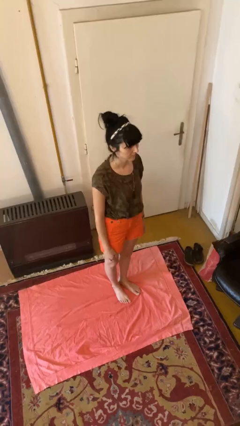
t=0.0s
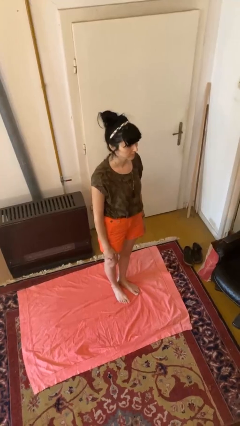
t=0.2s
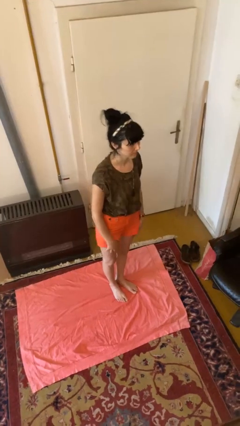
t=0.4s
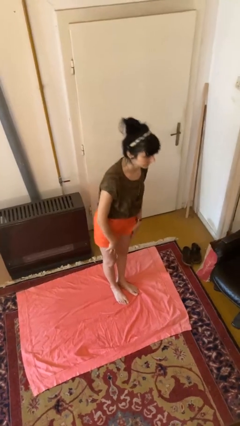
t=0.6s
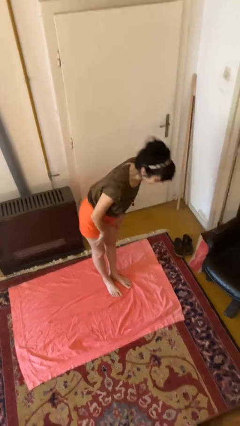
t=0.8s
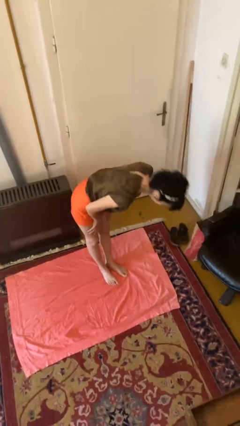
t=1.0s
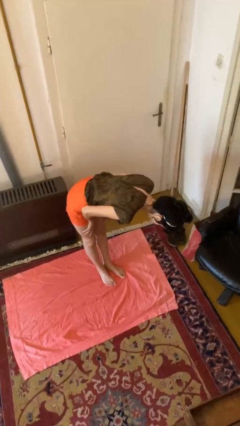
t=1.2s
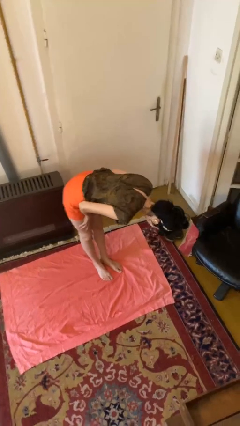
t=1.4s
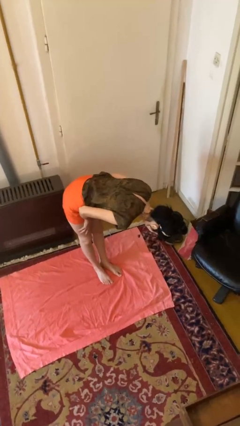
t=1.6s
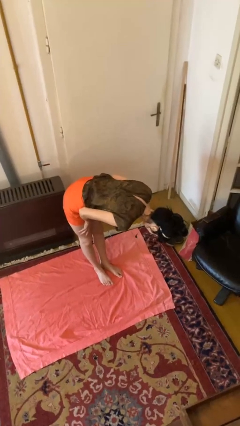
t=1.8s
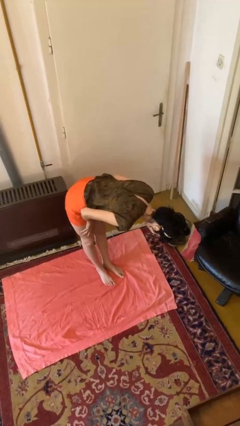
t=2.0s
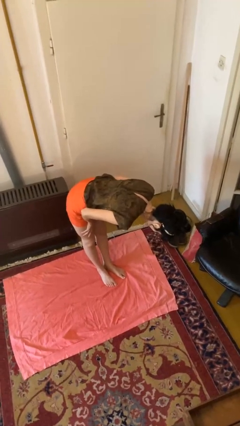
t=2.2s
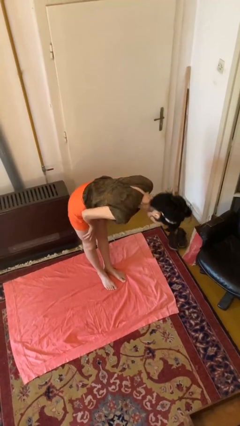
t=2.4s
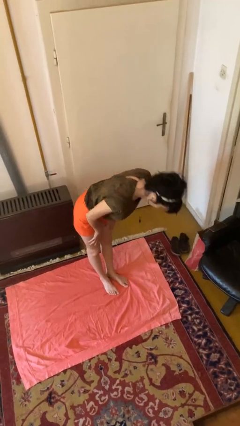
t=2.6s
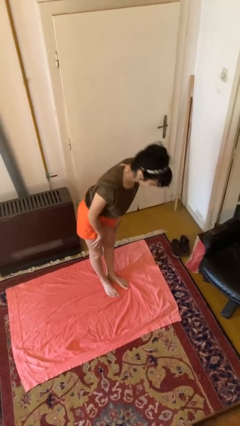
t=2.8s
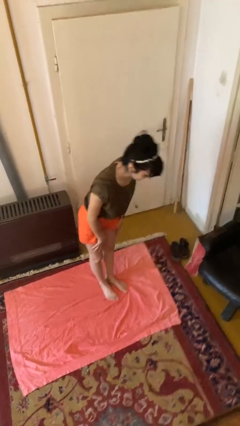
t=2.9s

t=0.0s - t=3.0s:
person bows

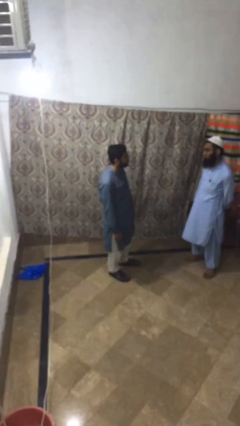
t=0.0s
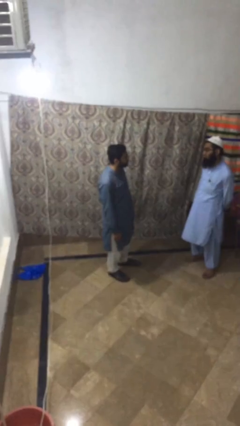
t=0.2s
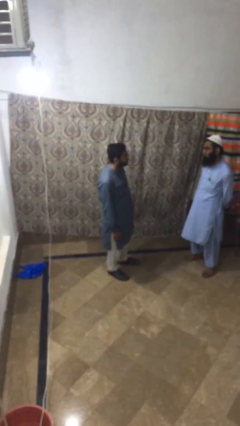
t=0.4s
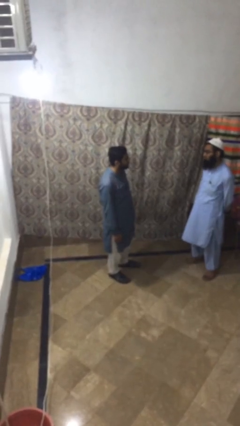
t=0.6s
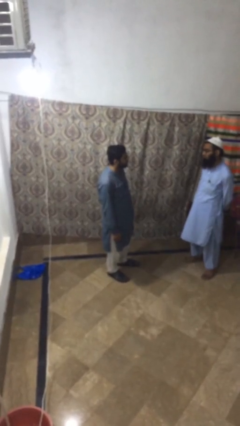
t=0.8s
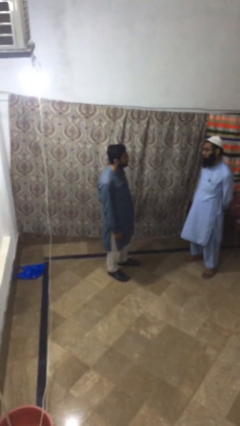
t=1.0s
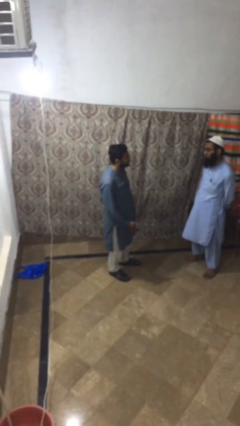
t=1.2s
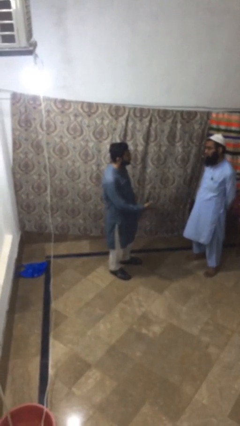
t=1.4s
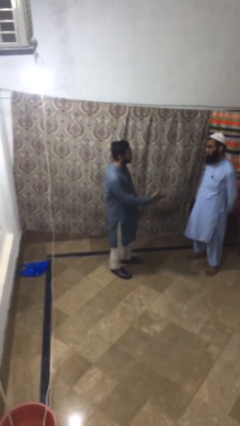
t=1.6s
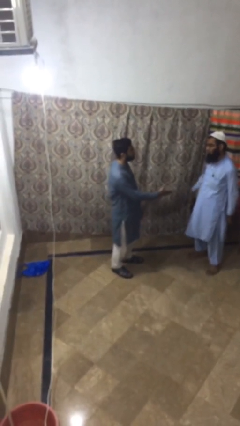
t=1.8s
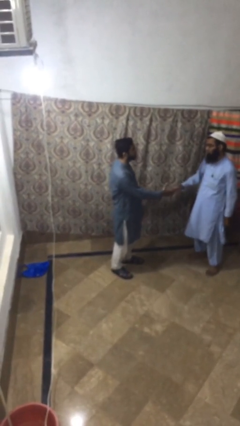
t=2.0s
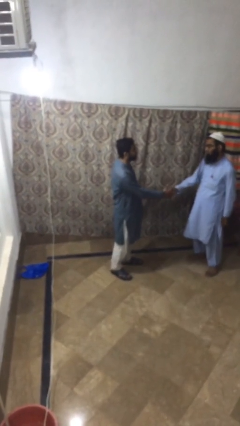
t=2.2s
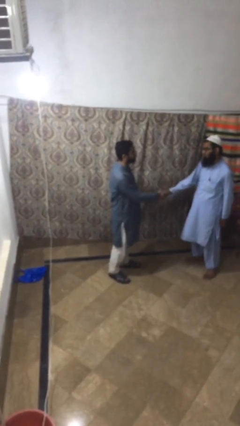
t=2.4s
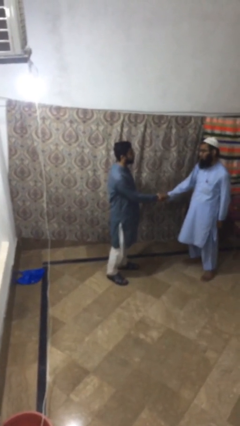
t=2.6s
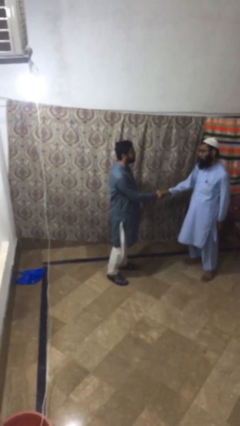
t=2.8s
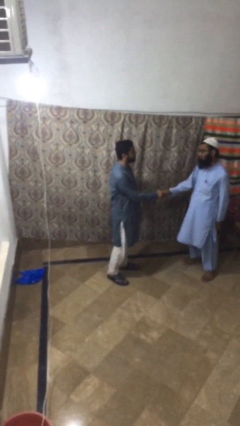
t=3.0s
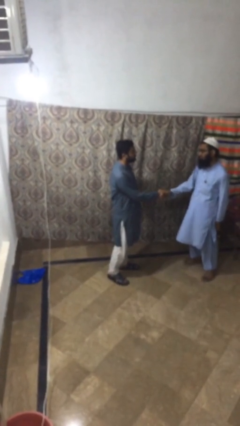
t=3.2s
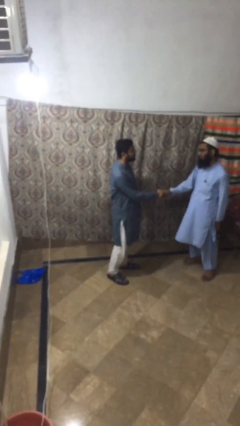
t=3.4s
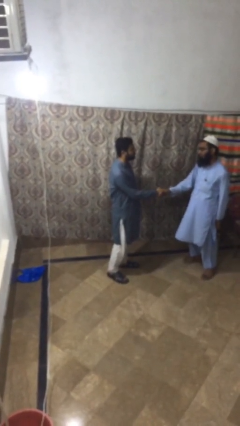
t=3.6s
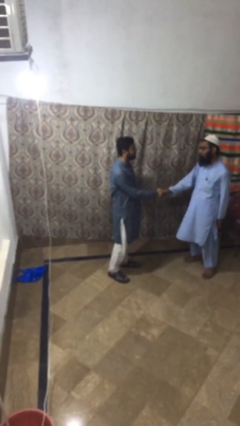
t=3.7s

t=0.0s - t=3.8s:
person shakes hand

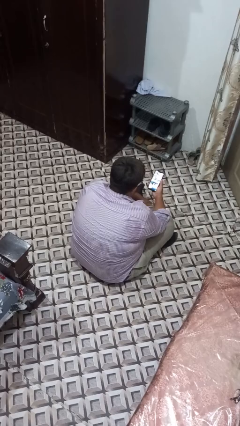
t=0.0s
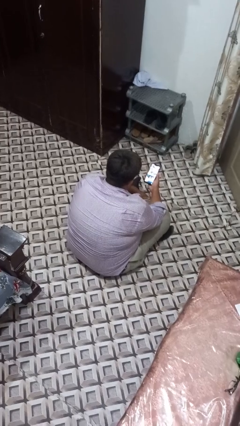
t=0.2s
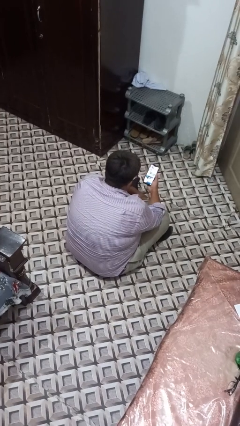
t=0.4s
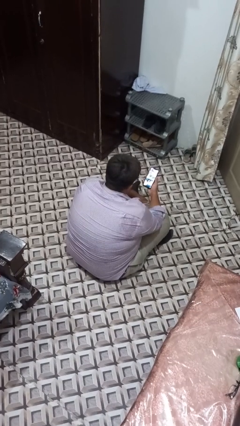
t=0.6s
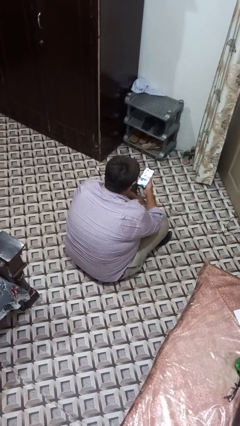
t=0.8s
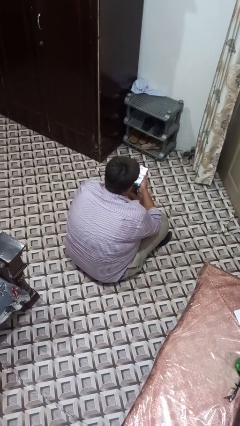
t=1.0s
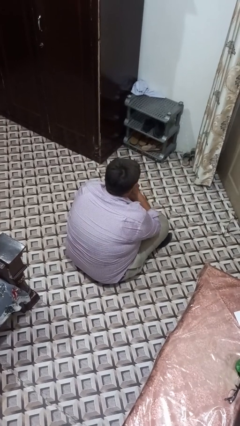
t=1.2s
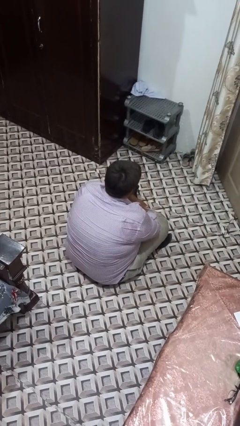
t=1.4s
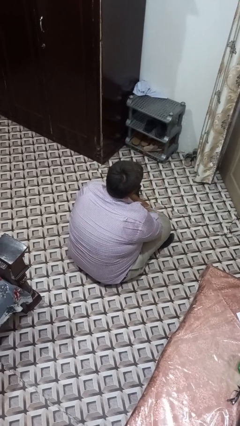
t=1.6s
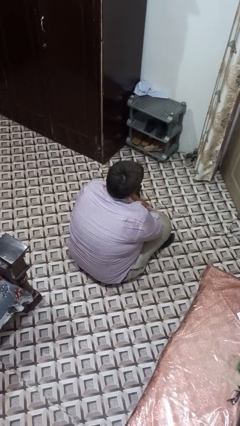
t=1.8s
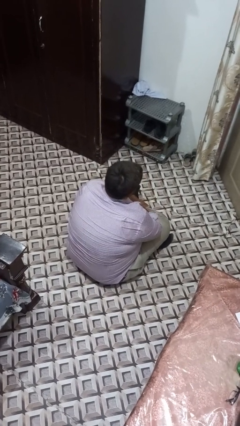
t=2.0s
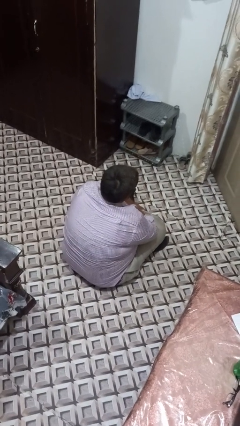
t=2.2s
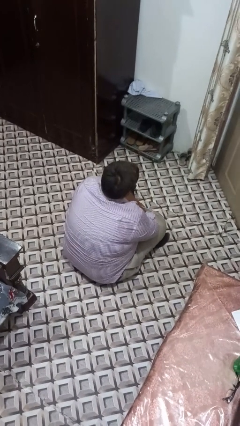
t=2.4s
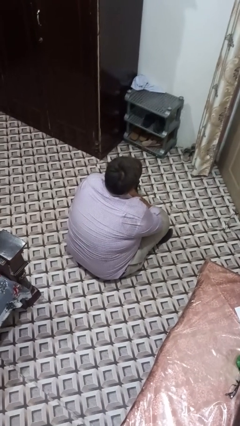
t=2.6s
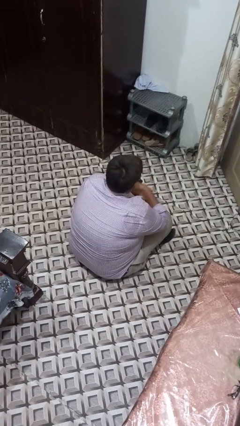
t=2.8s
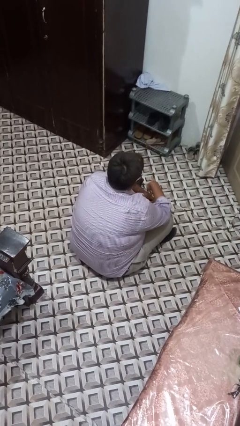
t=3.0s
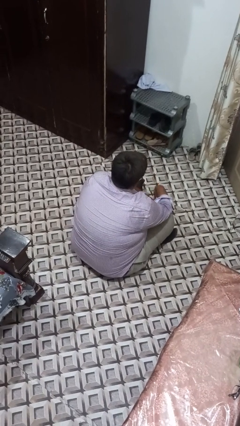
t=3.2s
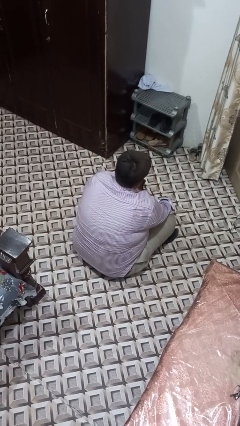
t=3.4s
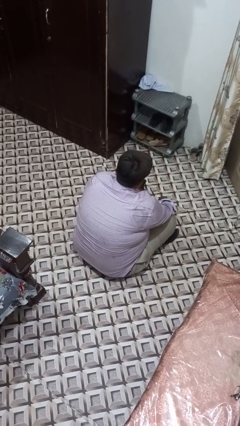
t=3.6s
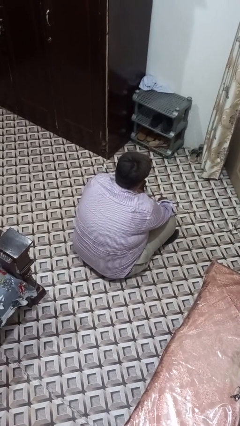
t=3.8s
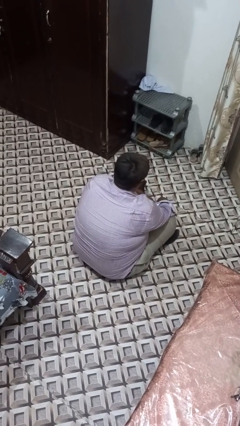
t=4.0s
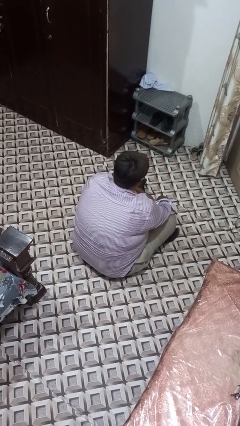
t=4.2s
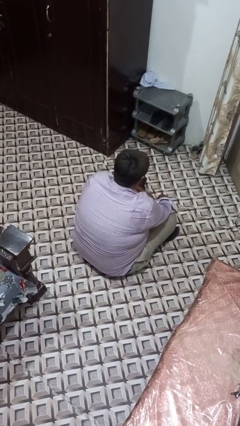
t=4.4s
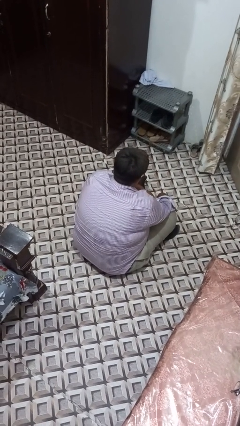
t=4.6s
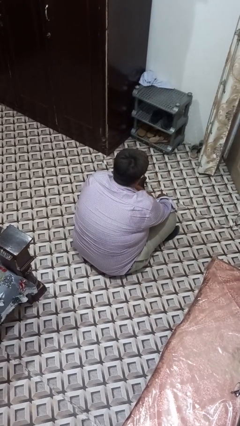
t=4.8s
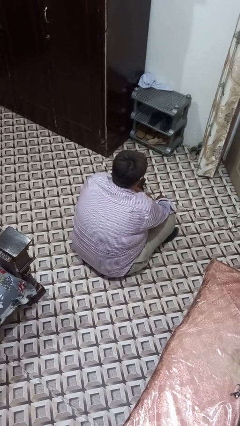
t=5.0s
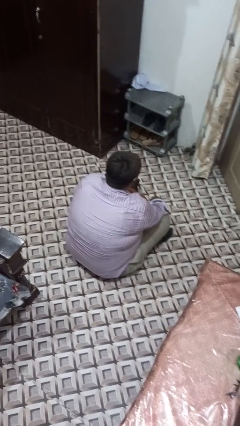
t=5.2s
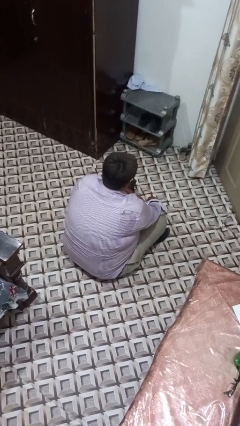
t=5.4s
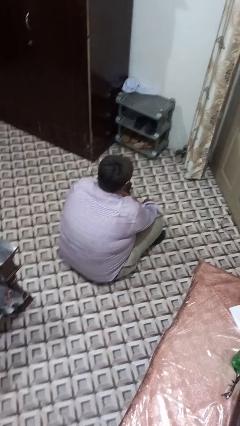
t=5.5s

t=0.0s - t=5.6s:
person puts phone into pocket

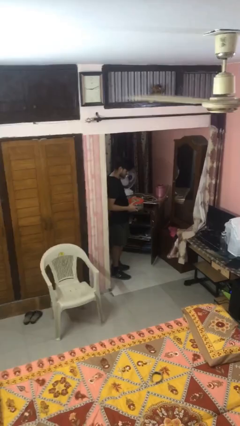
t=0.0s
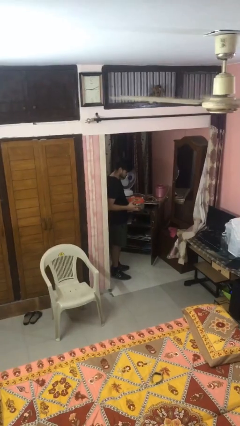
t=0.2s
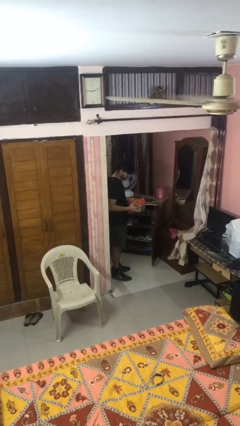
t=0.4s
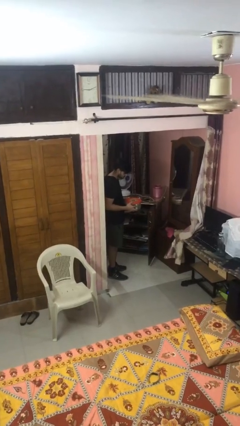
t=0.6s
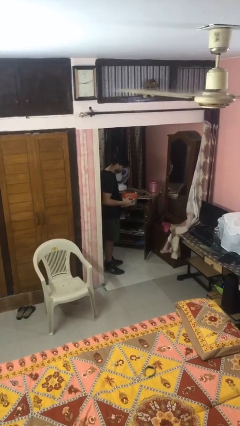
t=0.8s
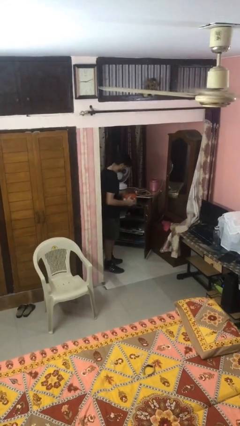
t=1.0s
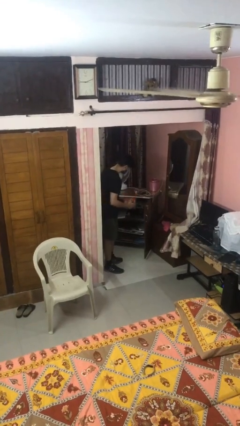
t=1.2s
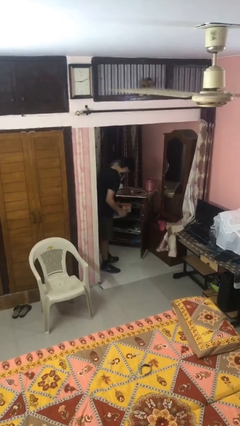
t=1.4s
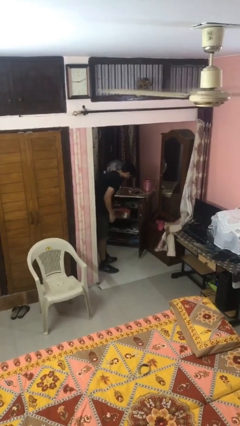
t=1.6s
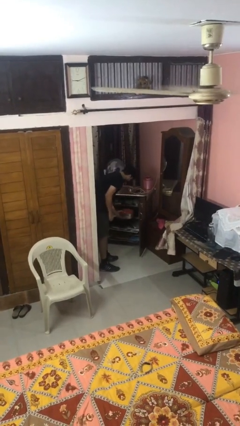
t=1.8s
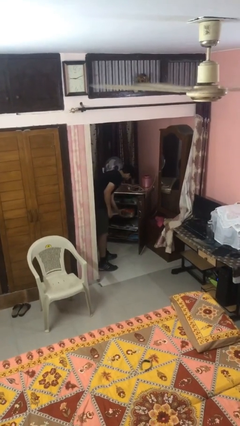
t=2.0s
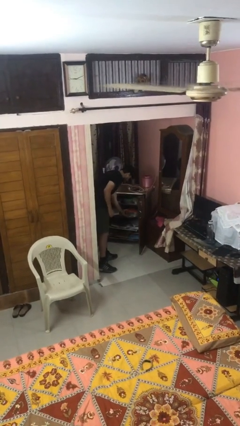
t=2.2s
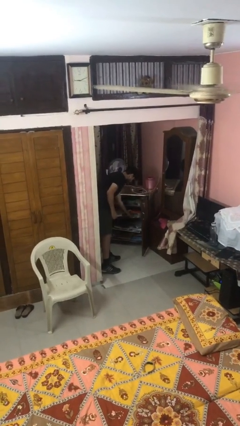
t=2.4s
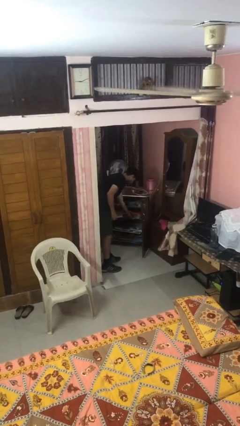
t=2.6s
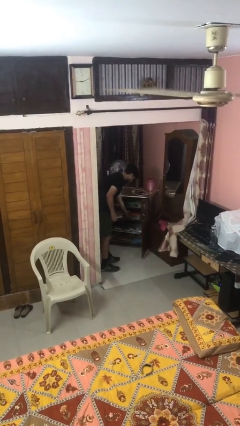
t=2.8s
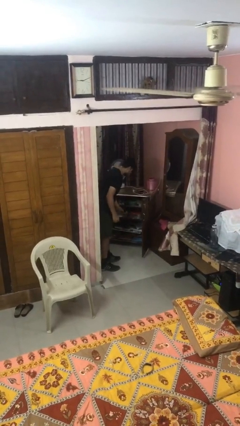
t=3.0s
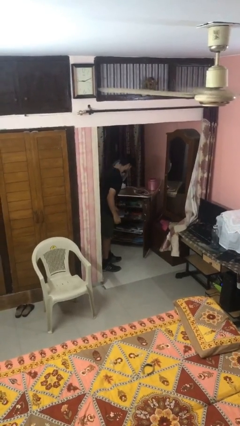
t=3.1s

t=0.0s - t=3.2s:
person puts down object into cabinet

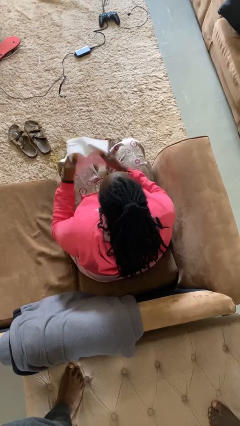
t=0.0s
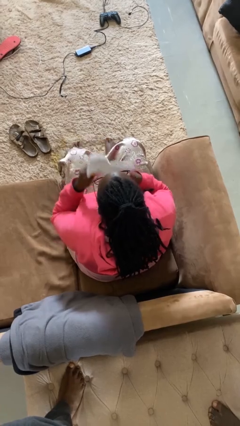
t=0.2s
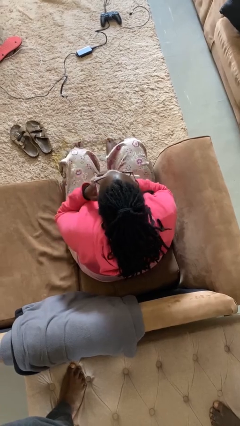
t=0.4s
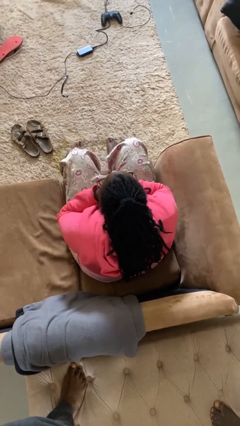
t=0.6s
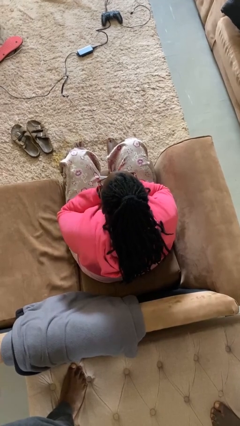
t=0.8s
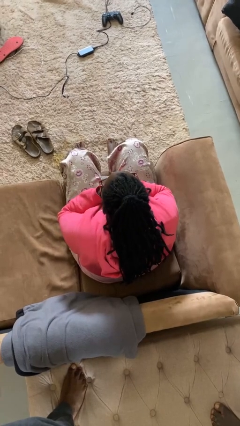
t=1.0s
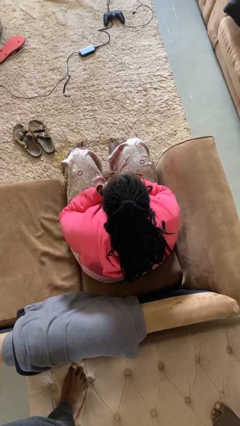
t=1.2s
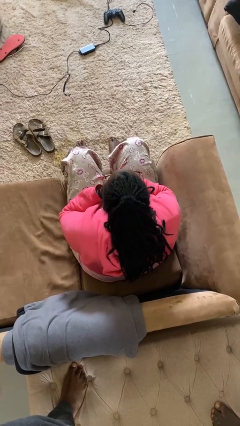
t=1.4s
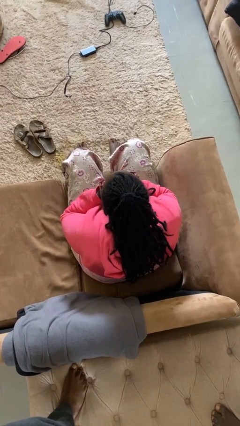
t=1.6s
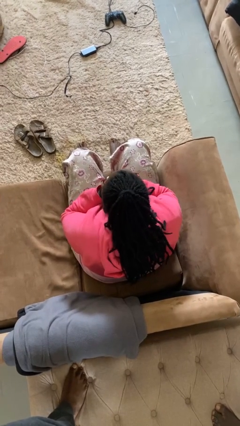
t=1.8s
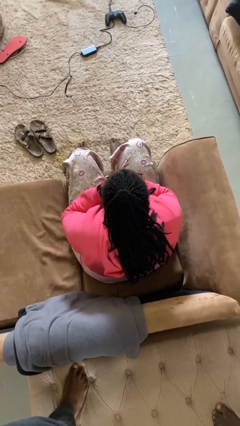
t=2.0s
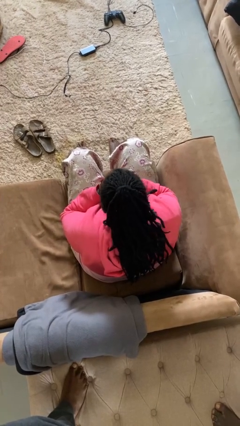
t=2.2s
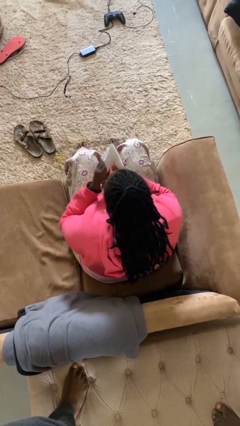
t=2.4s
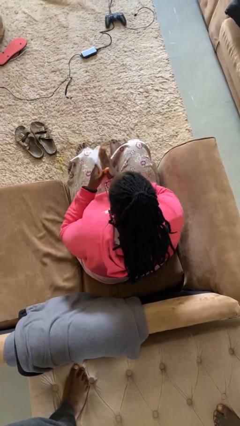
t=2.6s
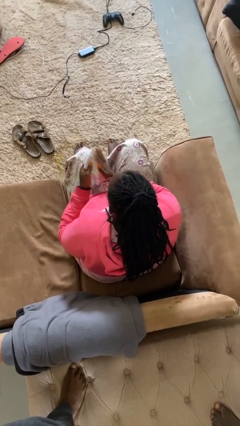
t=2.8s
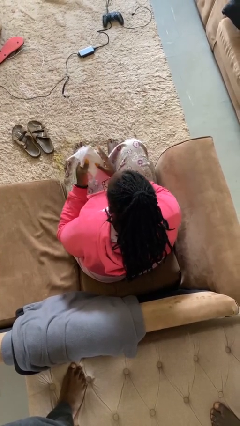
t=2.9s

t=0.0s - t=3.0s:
person blows nose
